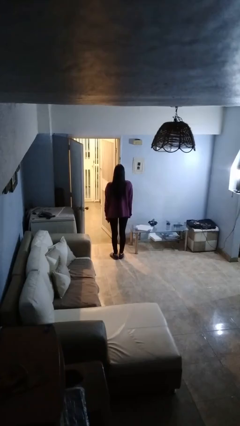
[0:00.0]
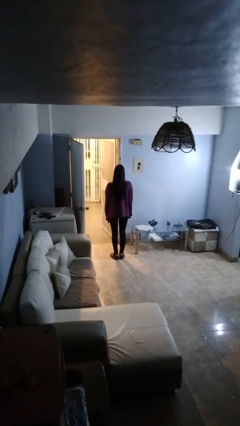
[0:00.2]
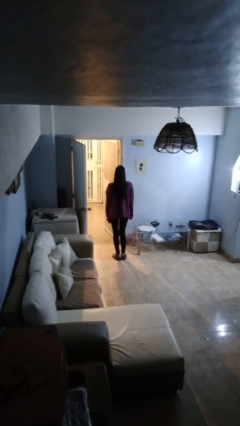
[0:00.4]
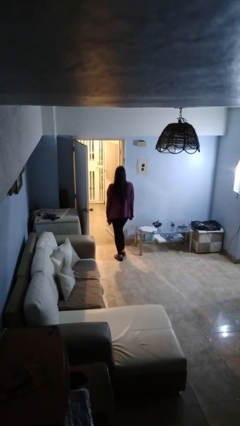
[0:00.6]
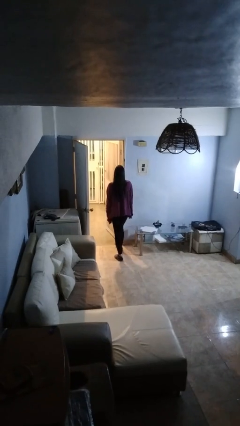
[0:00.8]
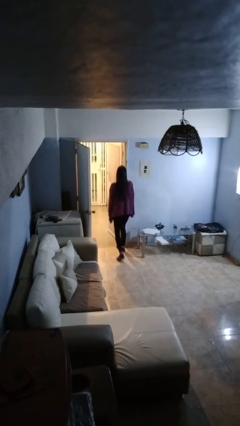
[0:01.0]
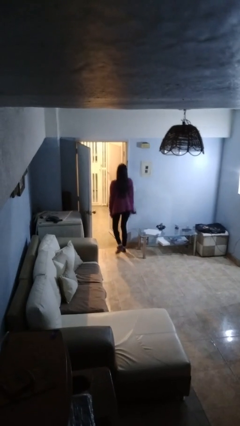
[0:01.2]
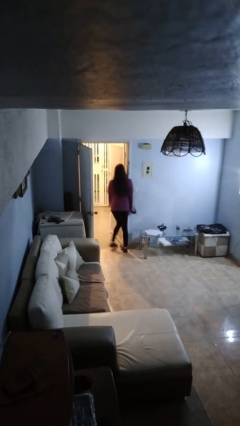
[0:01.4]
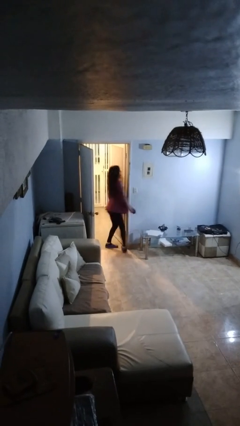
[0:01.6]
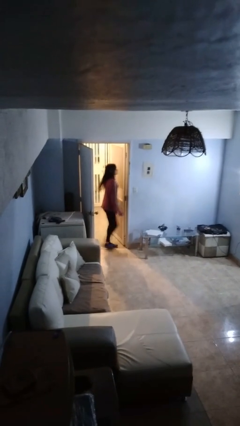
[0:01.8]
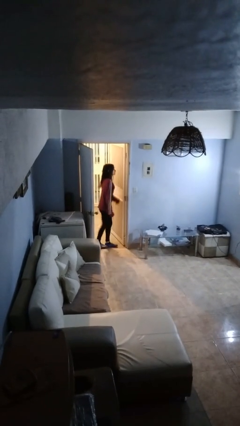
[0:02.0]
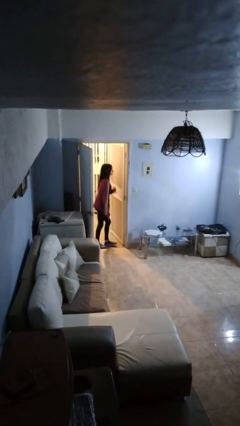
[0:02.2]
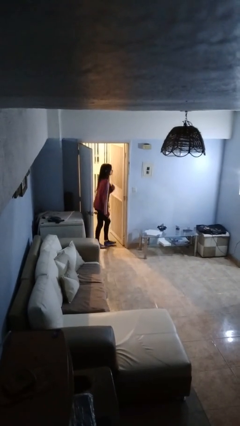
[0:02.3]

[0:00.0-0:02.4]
person bumps into wall

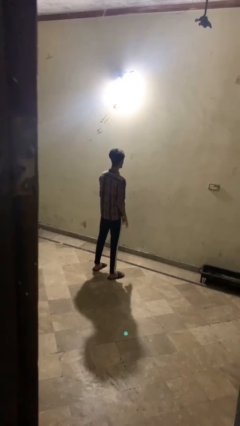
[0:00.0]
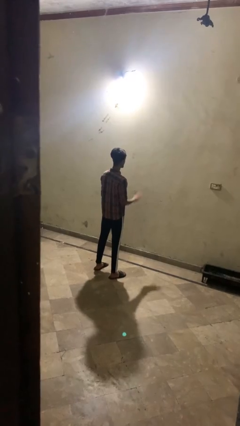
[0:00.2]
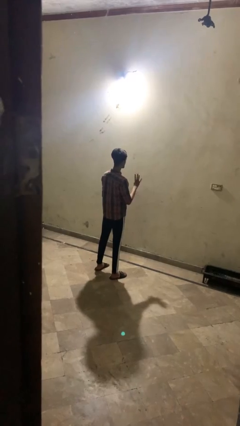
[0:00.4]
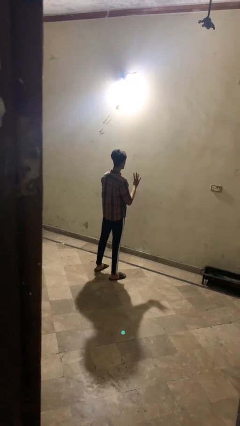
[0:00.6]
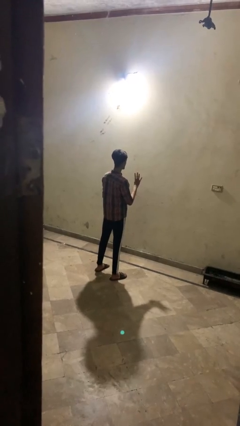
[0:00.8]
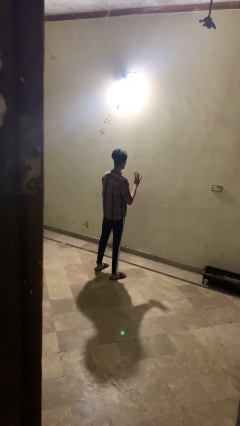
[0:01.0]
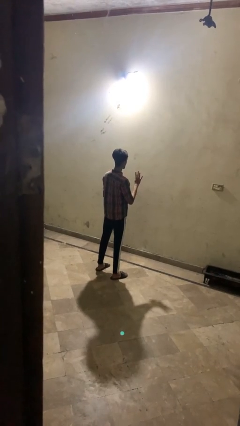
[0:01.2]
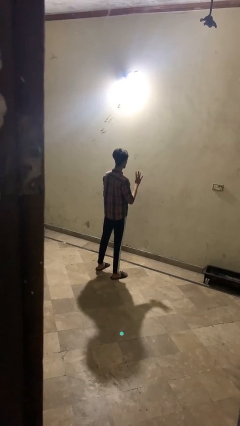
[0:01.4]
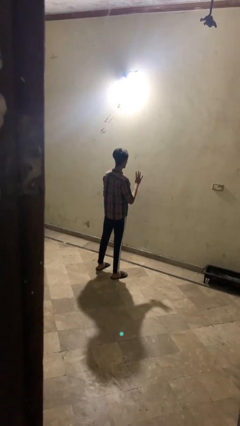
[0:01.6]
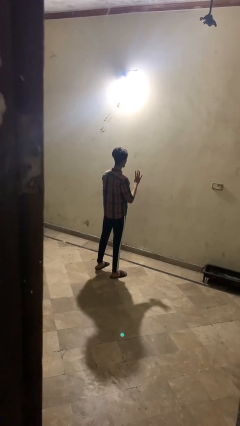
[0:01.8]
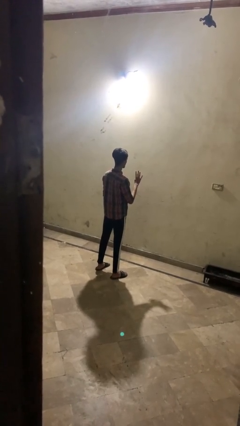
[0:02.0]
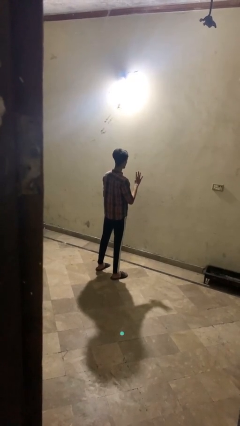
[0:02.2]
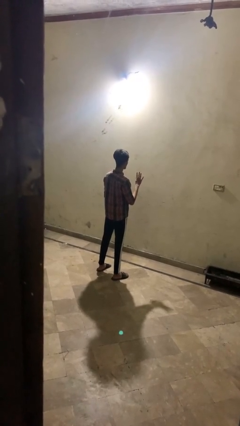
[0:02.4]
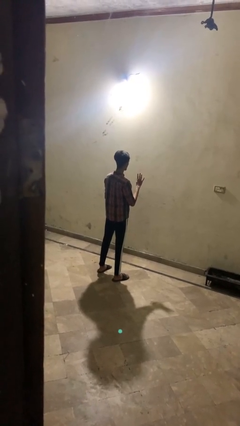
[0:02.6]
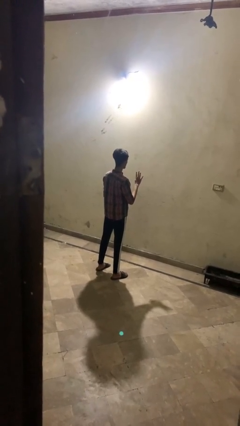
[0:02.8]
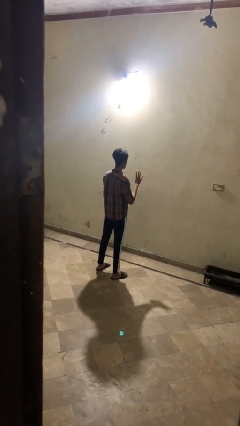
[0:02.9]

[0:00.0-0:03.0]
person gestures number four

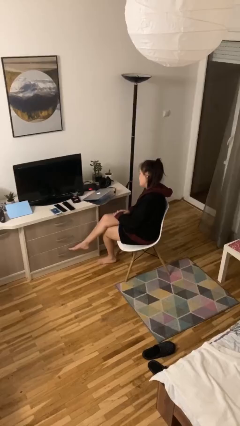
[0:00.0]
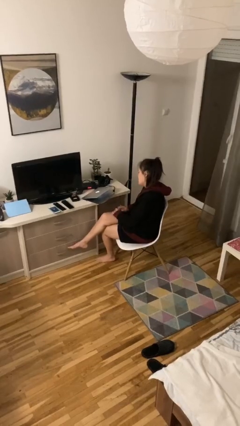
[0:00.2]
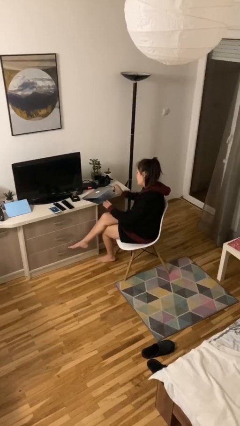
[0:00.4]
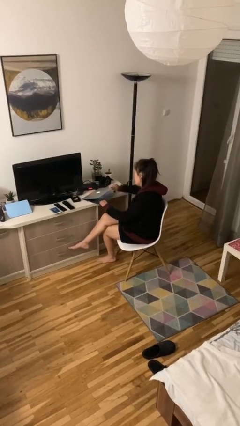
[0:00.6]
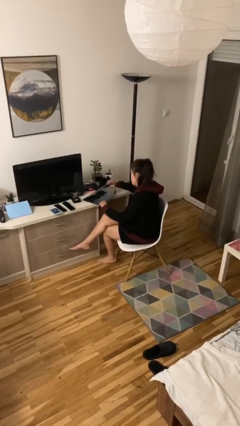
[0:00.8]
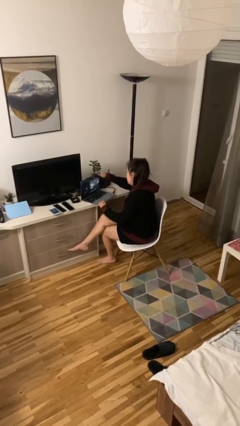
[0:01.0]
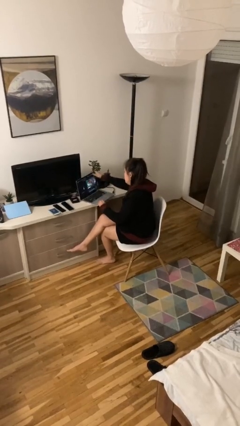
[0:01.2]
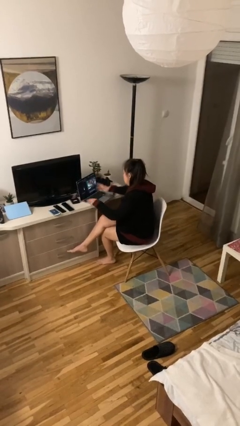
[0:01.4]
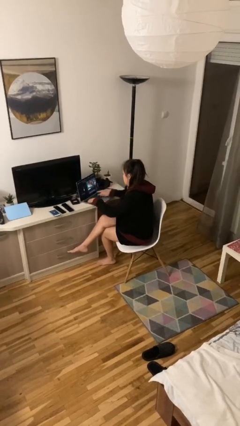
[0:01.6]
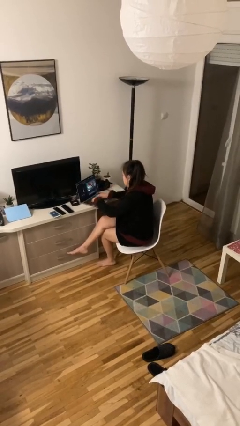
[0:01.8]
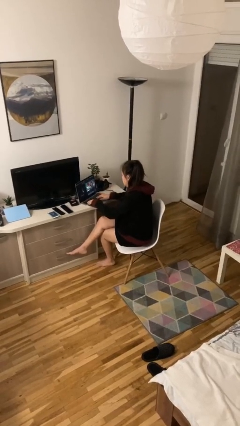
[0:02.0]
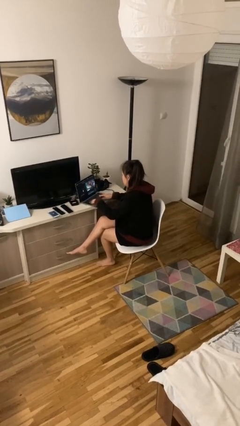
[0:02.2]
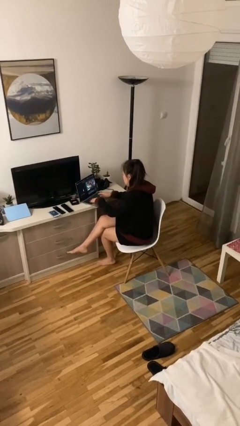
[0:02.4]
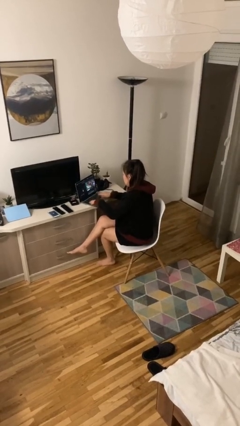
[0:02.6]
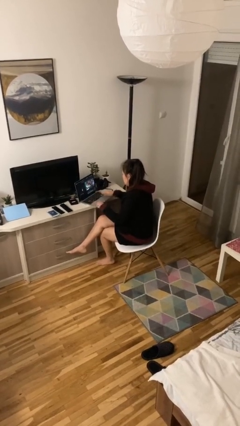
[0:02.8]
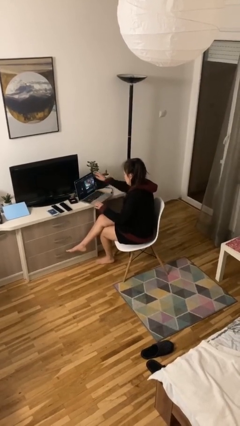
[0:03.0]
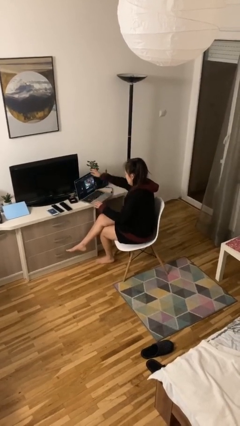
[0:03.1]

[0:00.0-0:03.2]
person interacts with laptop

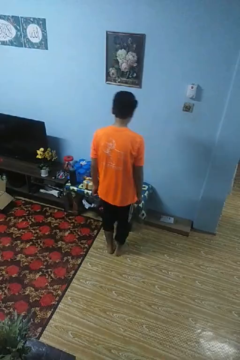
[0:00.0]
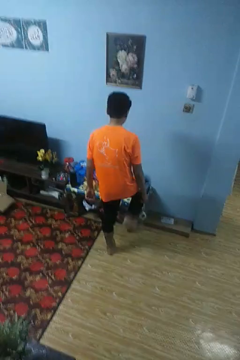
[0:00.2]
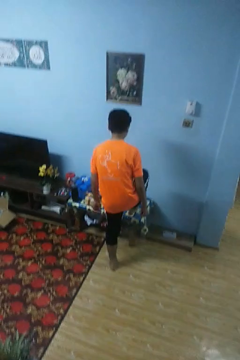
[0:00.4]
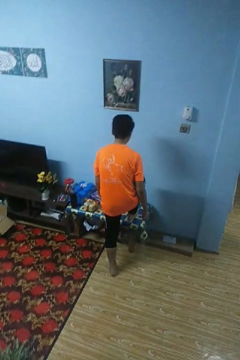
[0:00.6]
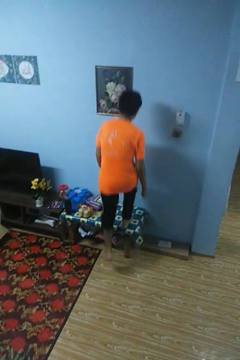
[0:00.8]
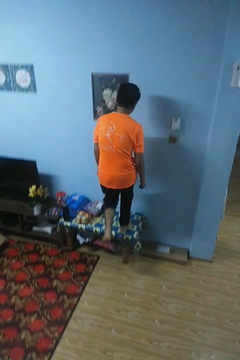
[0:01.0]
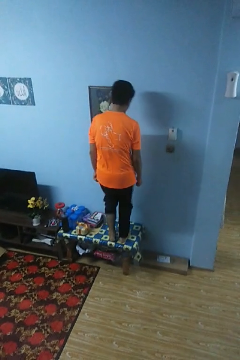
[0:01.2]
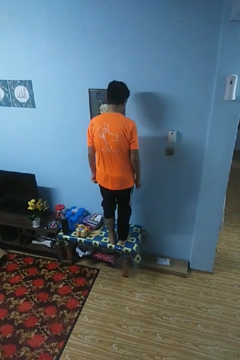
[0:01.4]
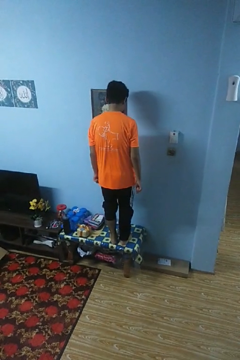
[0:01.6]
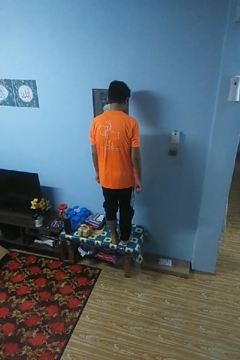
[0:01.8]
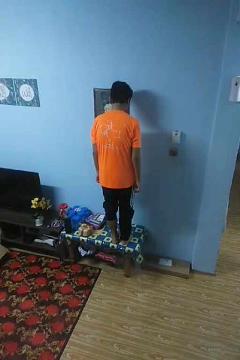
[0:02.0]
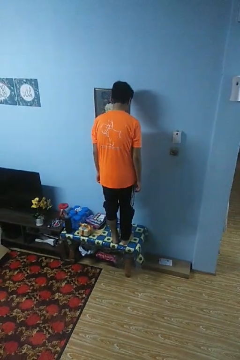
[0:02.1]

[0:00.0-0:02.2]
person climbs on table

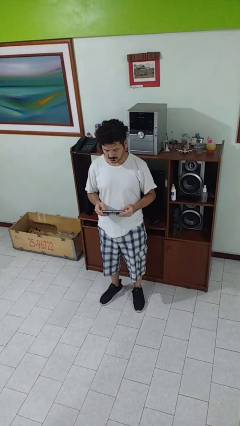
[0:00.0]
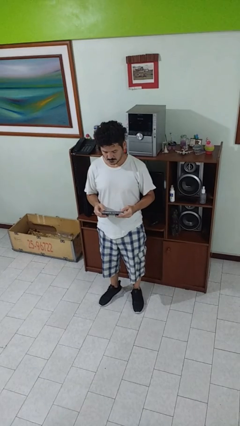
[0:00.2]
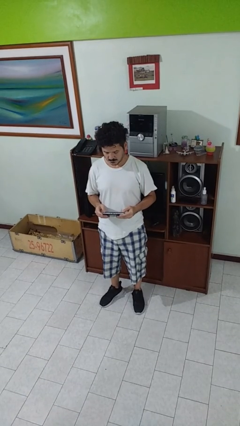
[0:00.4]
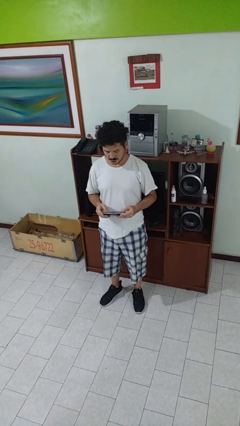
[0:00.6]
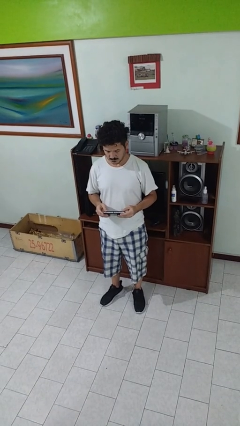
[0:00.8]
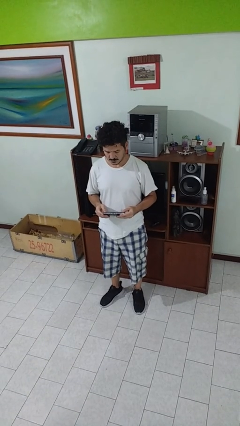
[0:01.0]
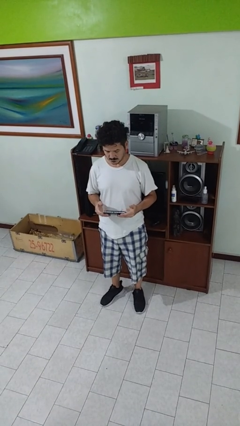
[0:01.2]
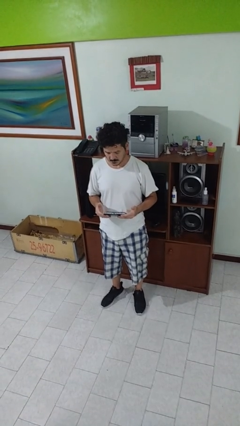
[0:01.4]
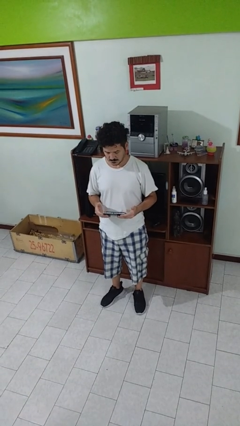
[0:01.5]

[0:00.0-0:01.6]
person interacts with handheld game

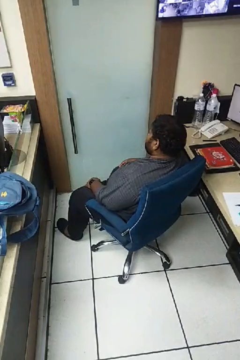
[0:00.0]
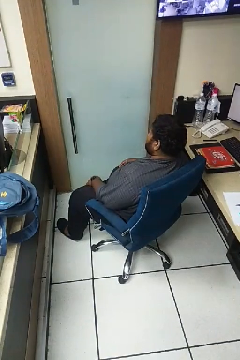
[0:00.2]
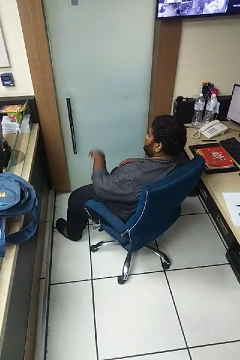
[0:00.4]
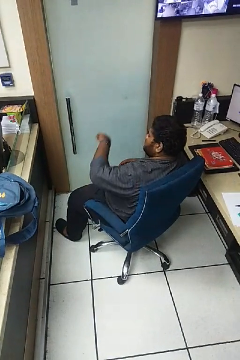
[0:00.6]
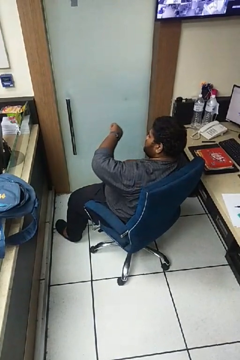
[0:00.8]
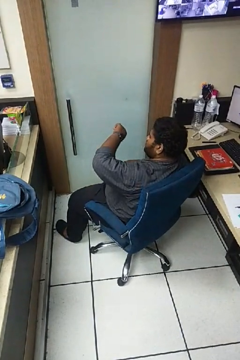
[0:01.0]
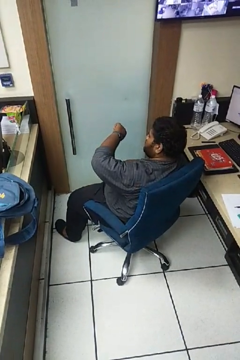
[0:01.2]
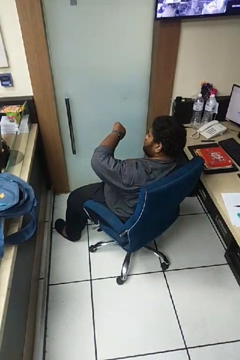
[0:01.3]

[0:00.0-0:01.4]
person looks at wristwatch

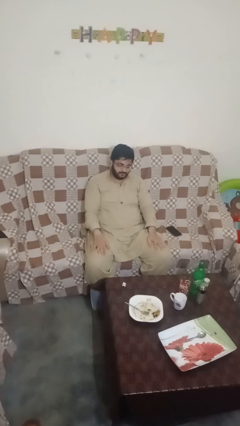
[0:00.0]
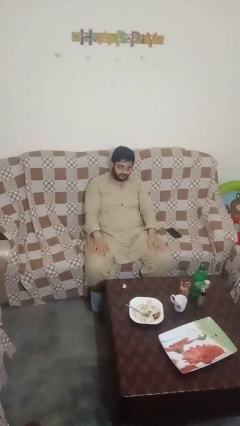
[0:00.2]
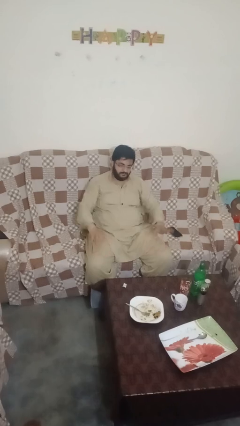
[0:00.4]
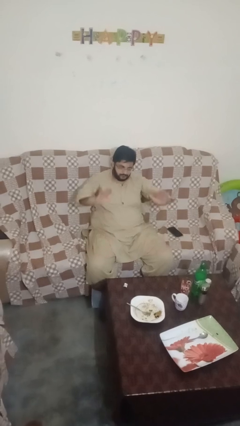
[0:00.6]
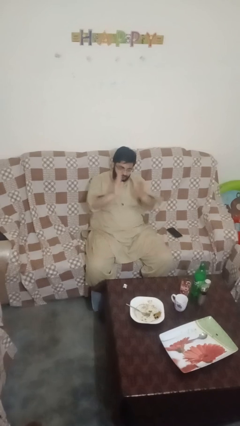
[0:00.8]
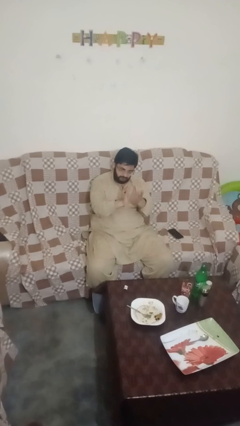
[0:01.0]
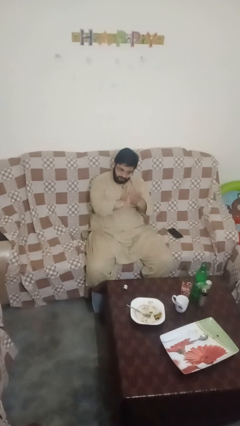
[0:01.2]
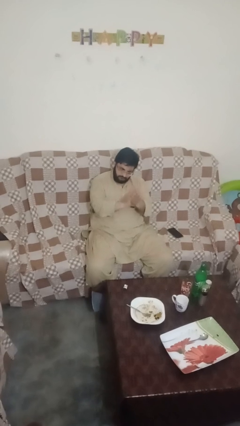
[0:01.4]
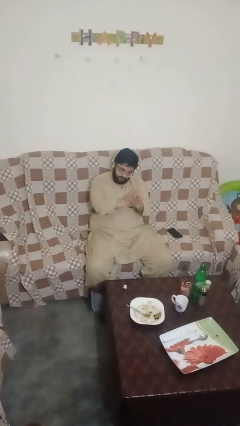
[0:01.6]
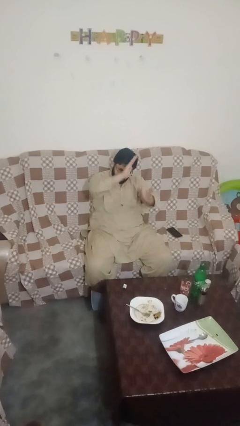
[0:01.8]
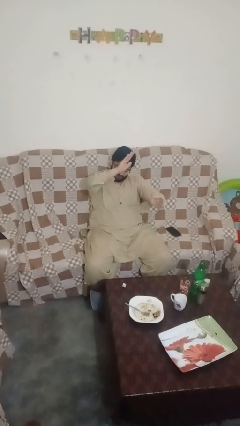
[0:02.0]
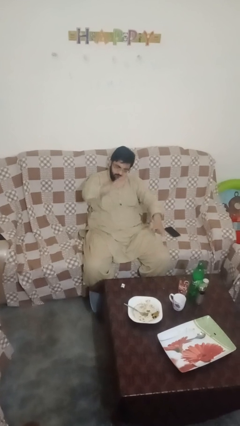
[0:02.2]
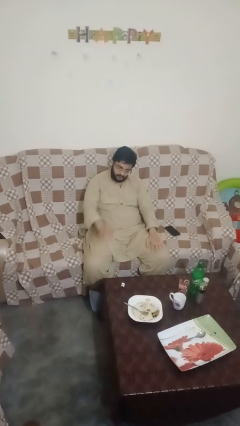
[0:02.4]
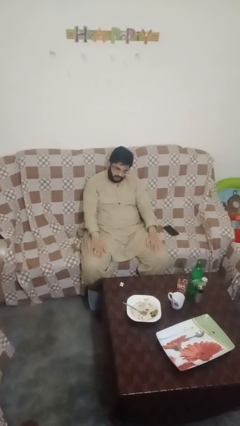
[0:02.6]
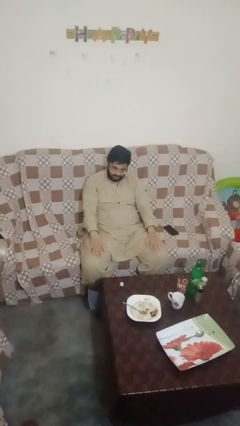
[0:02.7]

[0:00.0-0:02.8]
person claps hands

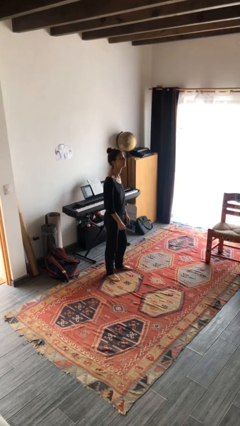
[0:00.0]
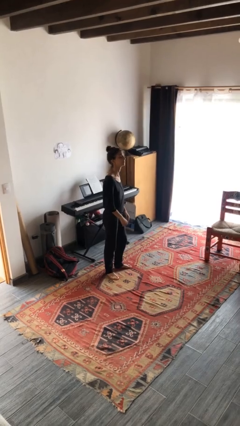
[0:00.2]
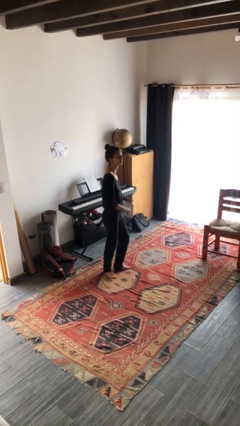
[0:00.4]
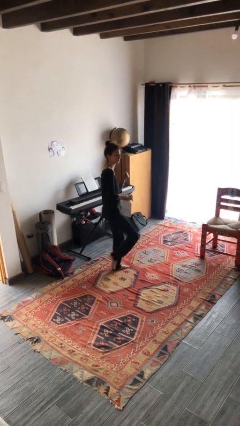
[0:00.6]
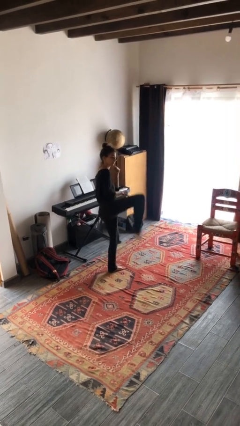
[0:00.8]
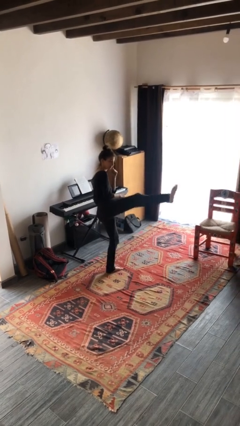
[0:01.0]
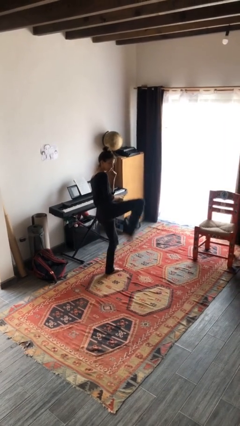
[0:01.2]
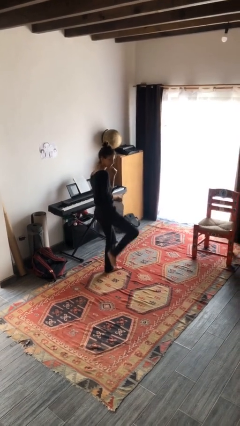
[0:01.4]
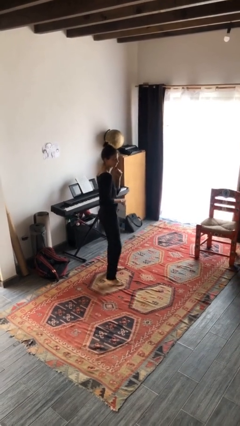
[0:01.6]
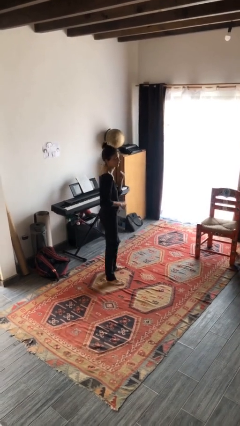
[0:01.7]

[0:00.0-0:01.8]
person karate kicks
